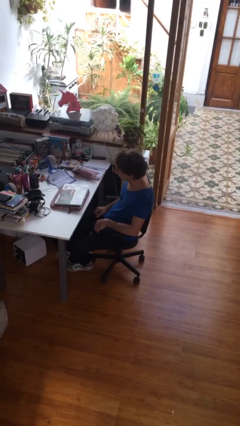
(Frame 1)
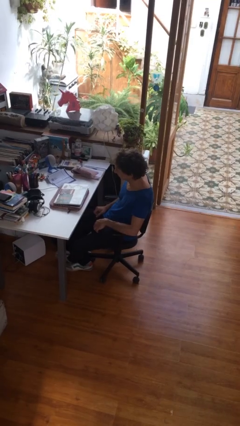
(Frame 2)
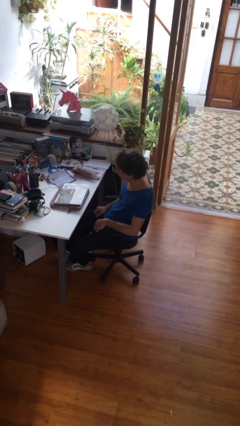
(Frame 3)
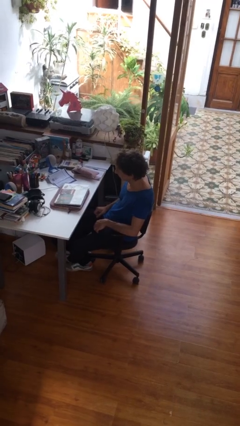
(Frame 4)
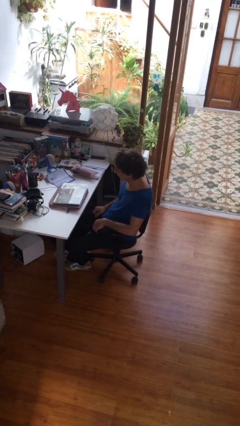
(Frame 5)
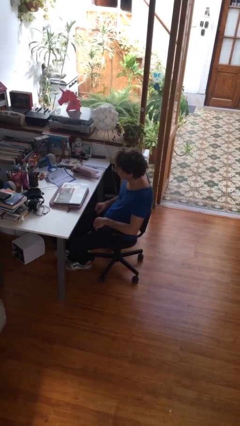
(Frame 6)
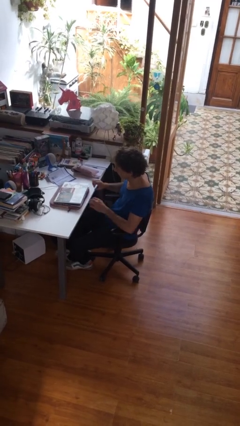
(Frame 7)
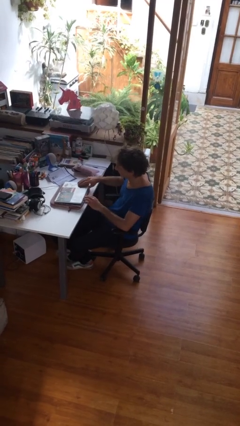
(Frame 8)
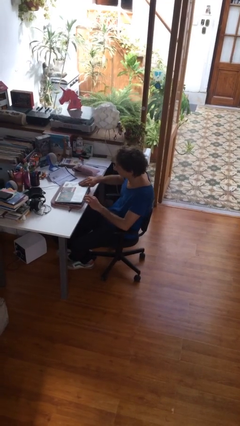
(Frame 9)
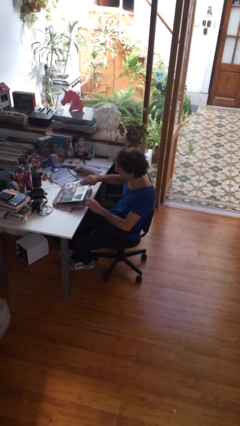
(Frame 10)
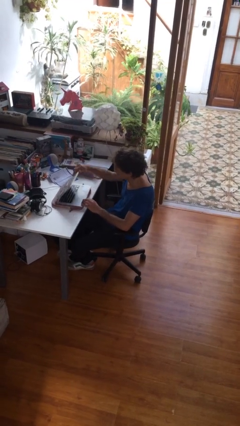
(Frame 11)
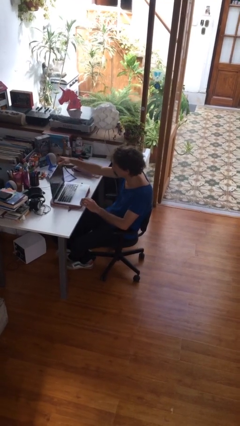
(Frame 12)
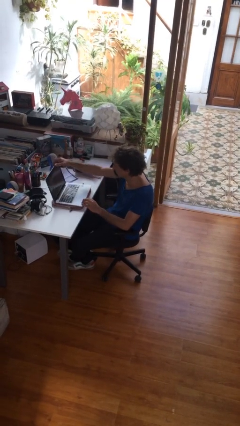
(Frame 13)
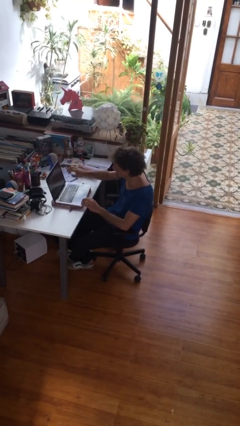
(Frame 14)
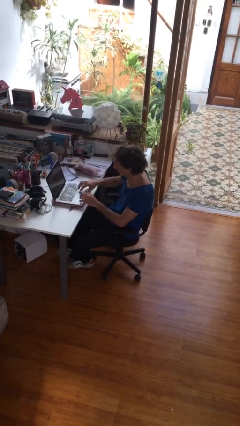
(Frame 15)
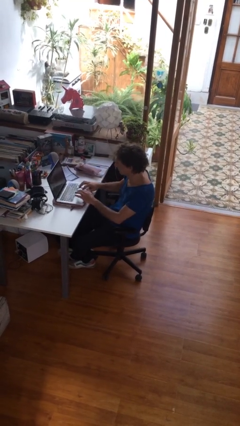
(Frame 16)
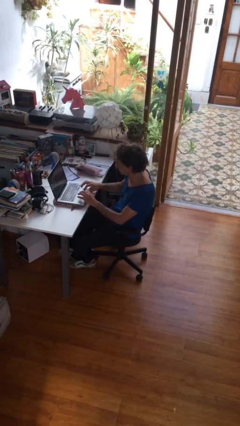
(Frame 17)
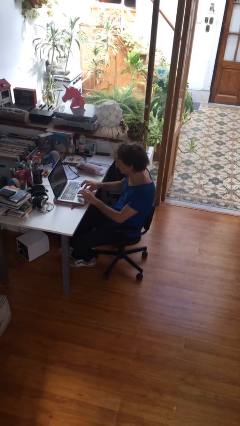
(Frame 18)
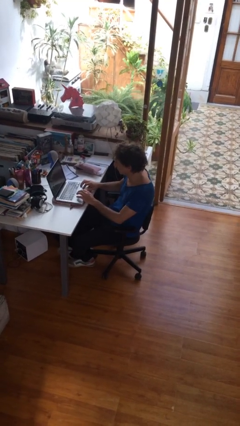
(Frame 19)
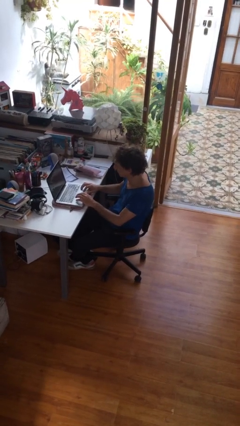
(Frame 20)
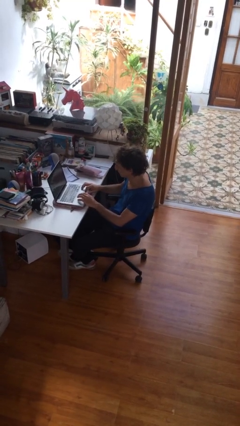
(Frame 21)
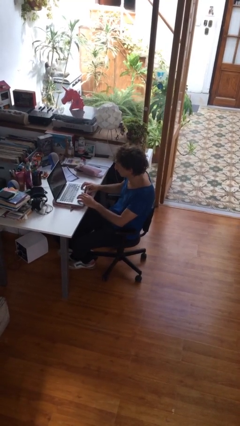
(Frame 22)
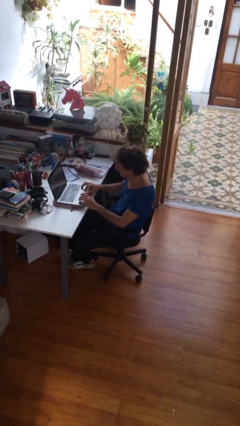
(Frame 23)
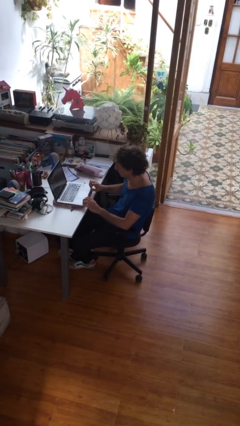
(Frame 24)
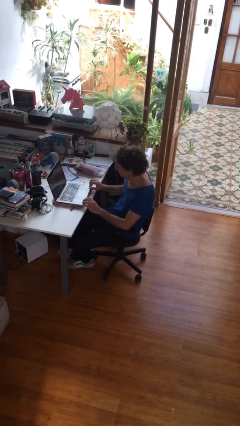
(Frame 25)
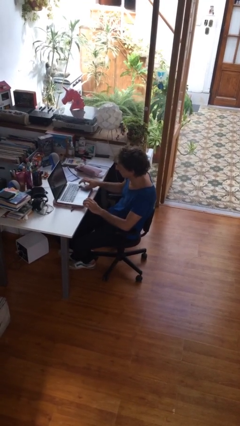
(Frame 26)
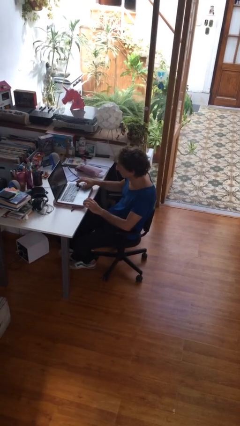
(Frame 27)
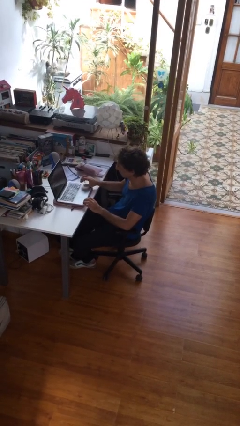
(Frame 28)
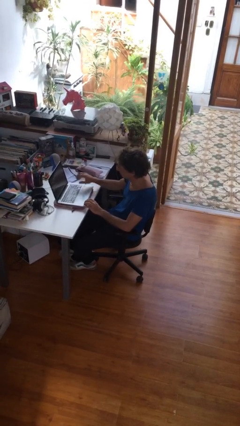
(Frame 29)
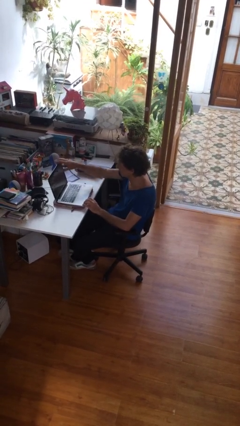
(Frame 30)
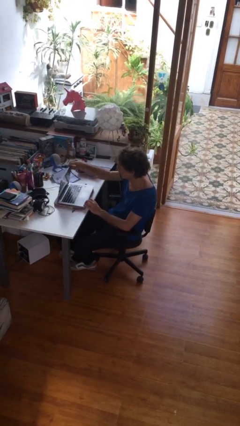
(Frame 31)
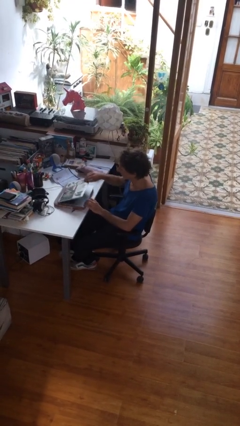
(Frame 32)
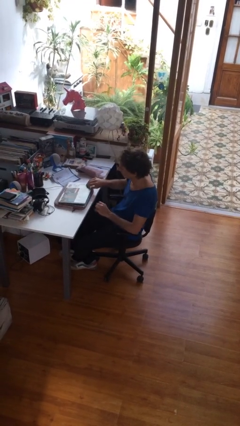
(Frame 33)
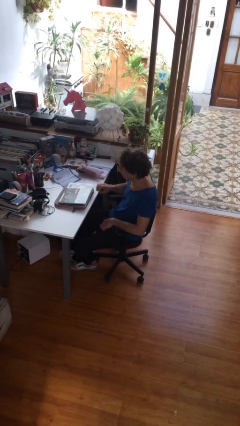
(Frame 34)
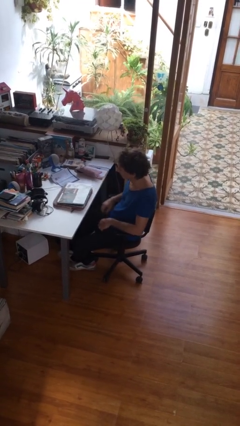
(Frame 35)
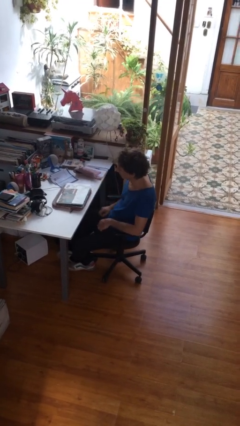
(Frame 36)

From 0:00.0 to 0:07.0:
person interacts with laptop

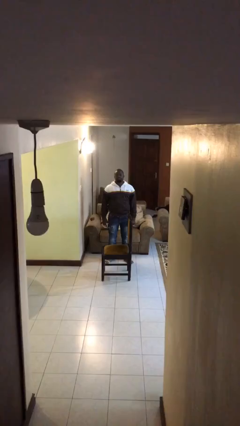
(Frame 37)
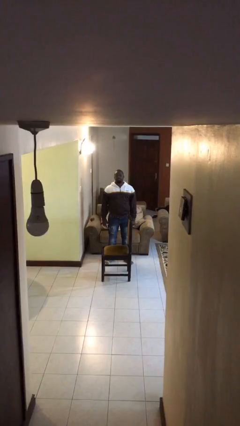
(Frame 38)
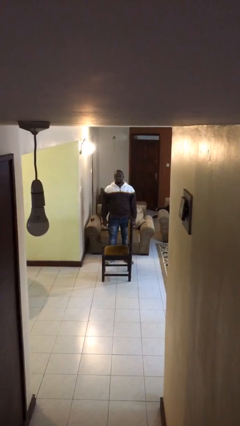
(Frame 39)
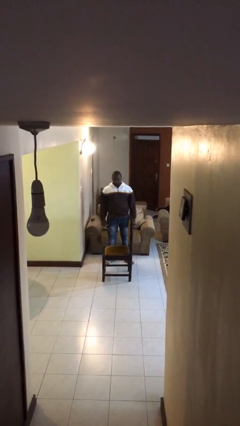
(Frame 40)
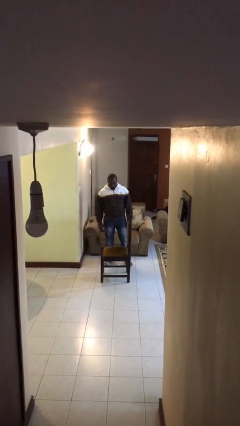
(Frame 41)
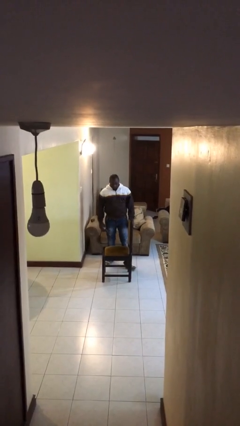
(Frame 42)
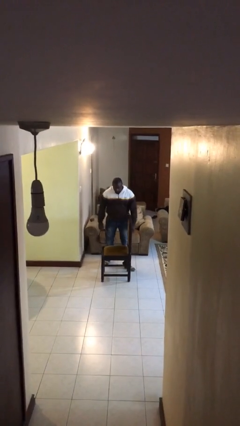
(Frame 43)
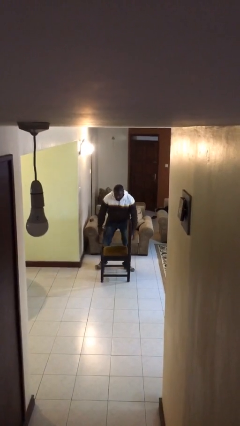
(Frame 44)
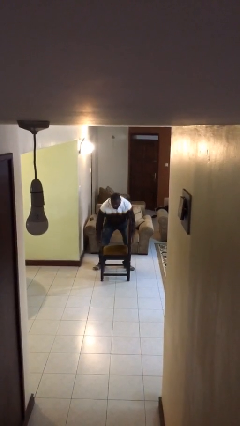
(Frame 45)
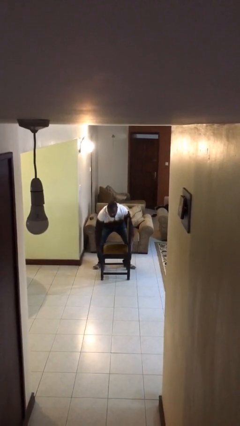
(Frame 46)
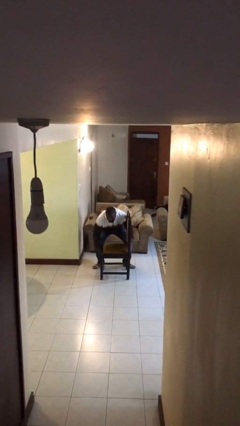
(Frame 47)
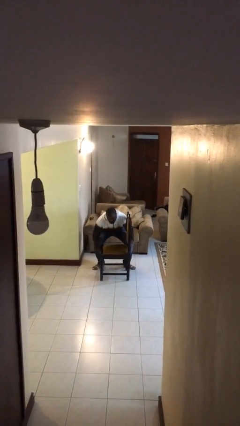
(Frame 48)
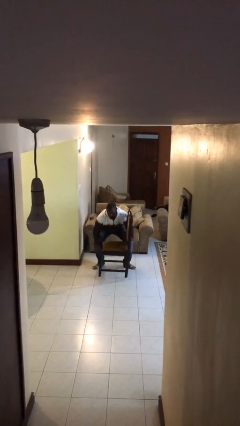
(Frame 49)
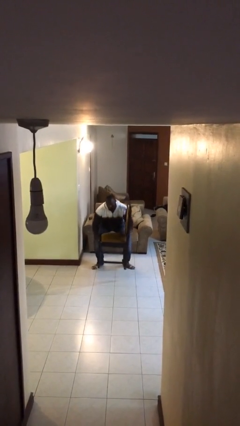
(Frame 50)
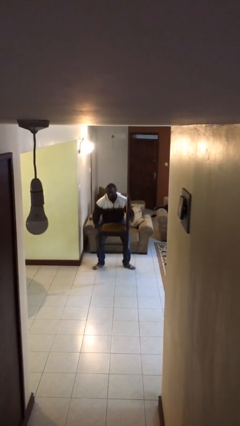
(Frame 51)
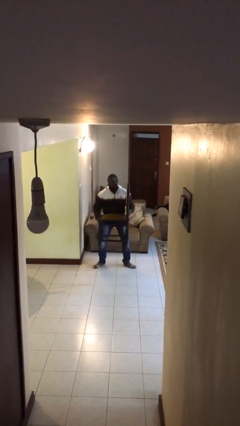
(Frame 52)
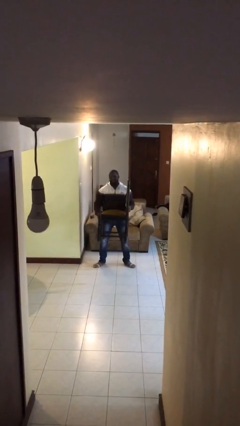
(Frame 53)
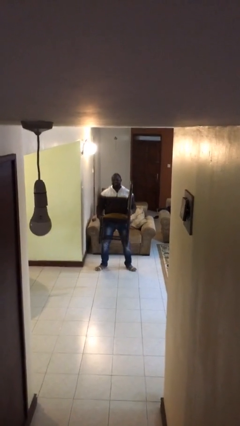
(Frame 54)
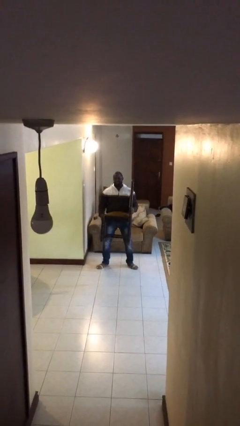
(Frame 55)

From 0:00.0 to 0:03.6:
person picks up object from floor

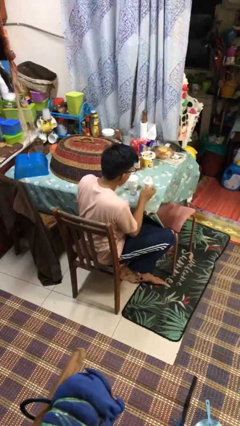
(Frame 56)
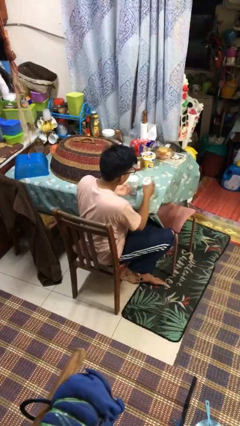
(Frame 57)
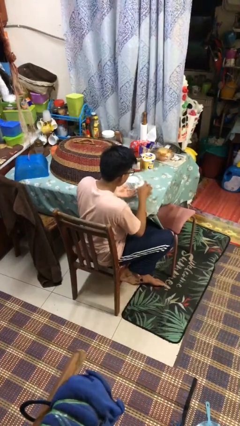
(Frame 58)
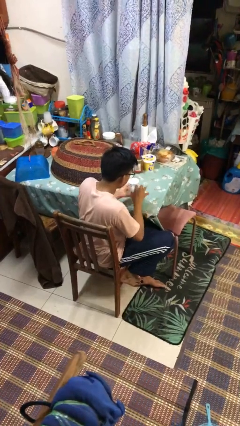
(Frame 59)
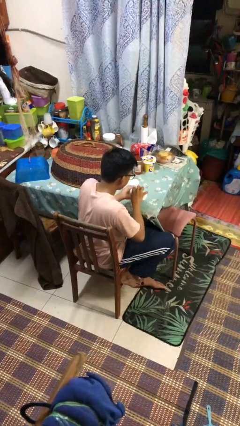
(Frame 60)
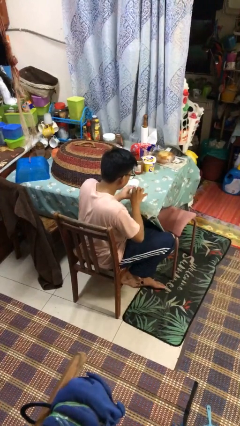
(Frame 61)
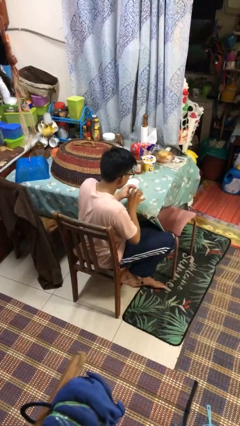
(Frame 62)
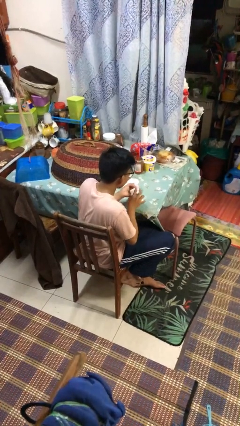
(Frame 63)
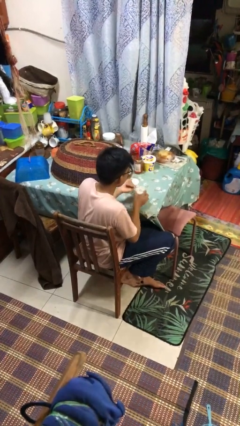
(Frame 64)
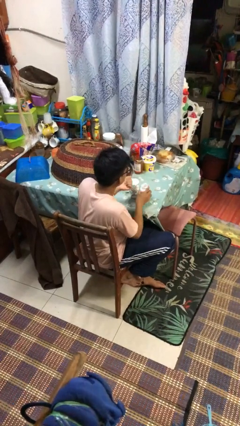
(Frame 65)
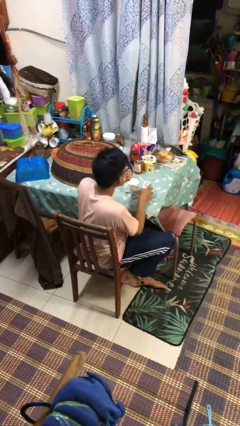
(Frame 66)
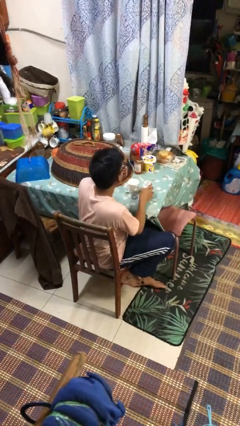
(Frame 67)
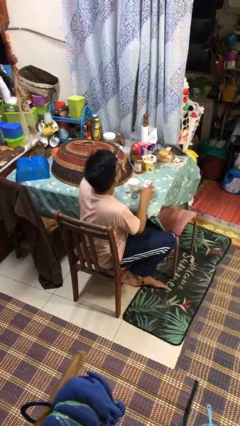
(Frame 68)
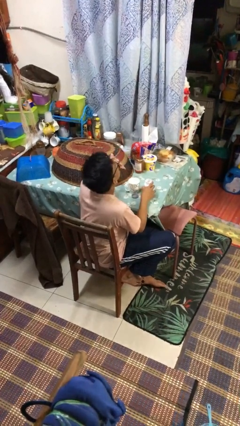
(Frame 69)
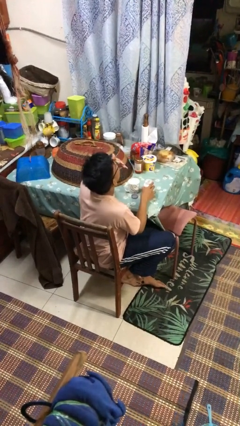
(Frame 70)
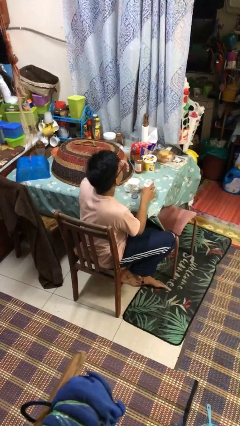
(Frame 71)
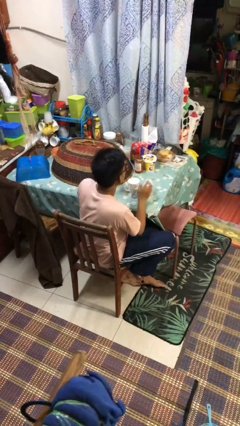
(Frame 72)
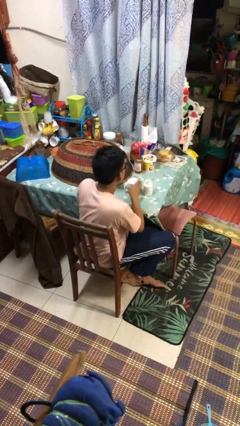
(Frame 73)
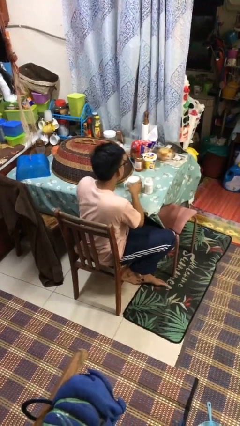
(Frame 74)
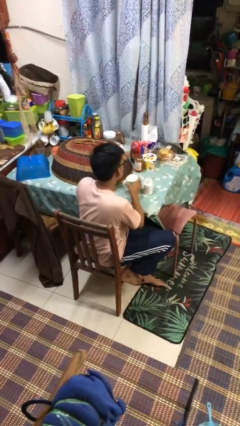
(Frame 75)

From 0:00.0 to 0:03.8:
person takes medicine pills

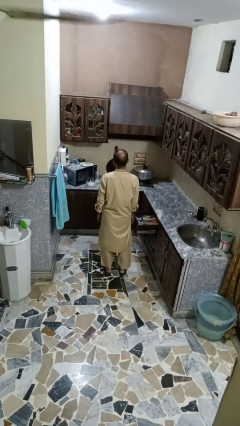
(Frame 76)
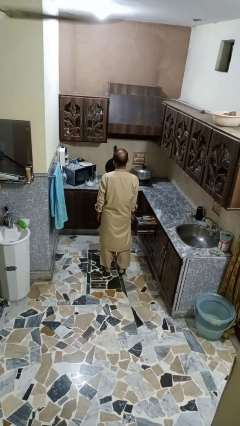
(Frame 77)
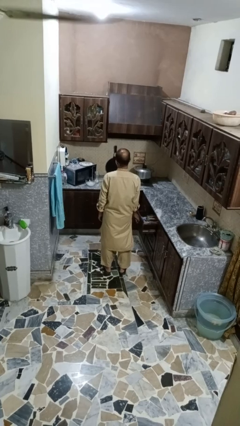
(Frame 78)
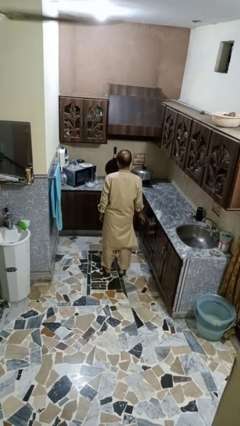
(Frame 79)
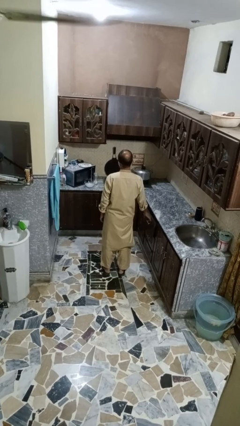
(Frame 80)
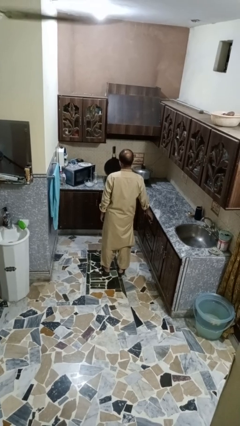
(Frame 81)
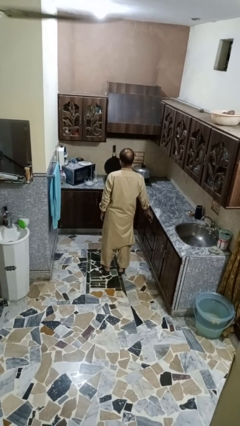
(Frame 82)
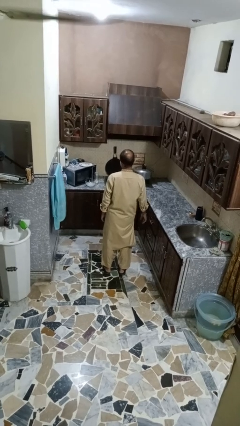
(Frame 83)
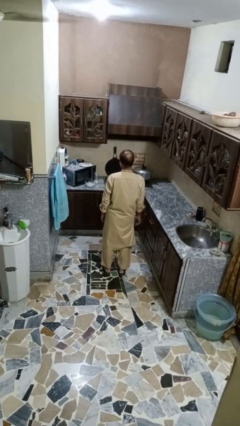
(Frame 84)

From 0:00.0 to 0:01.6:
person closes kitchen drawer

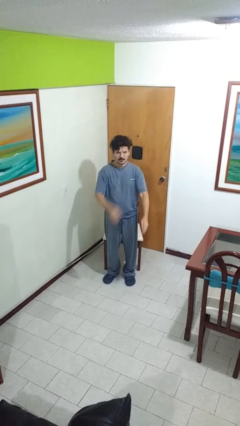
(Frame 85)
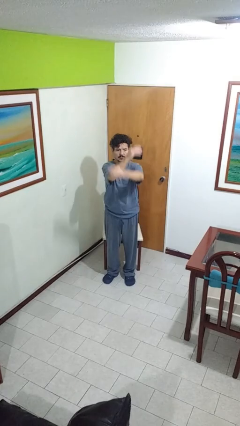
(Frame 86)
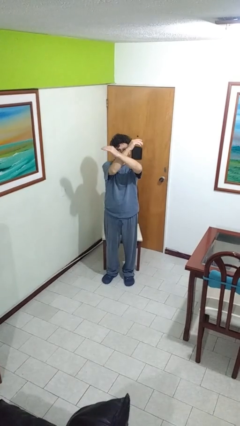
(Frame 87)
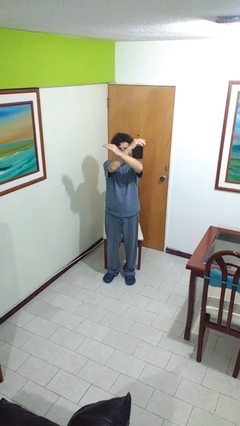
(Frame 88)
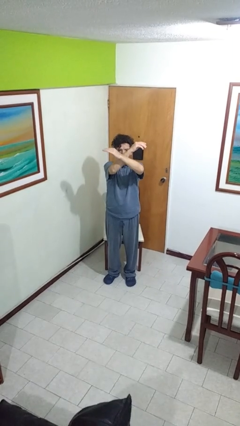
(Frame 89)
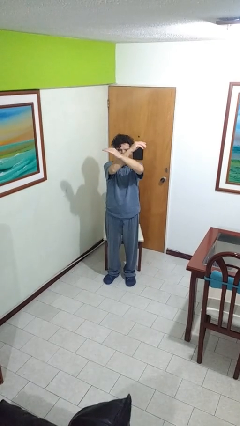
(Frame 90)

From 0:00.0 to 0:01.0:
person gestures arms x

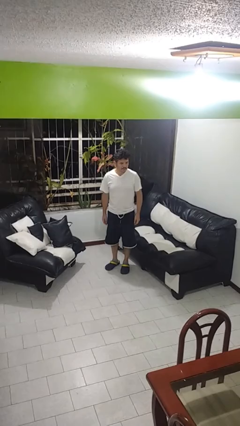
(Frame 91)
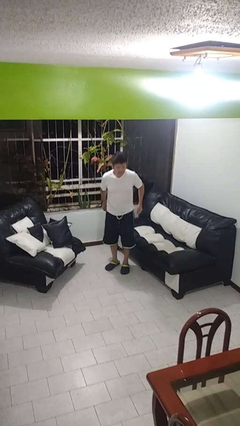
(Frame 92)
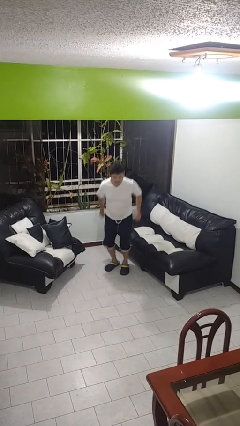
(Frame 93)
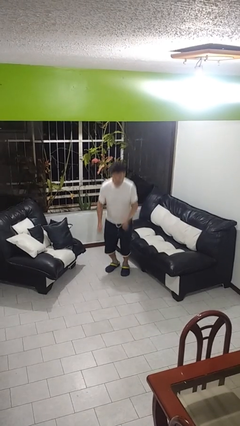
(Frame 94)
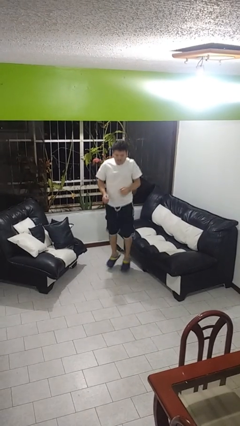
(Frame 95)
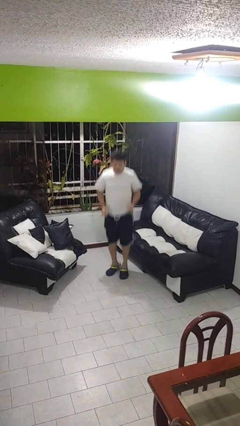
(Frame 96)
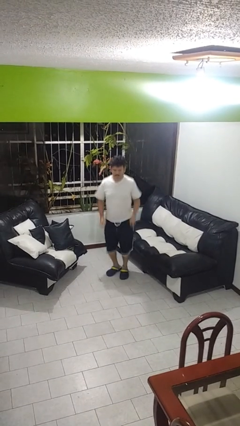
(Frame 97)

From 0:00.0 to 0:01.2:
person jumps
